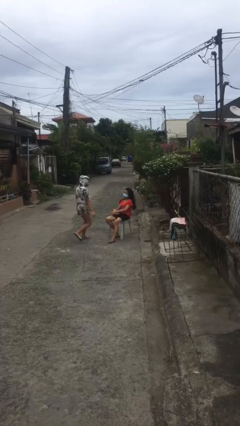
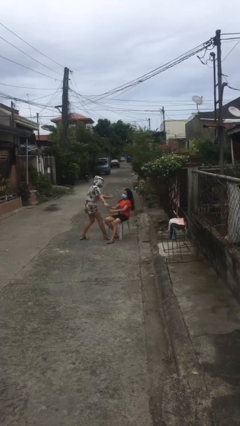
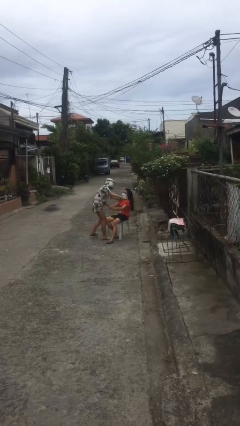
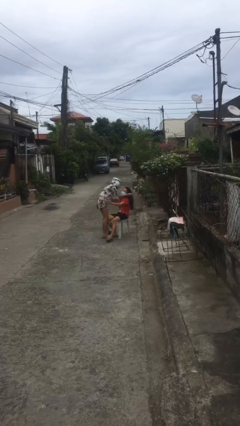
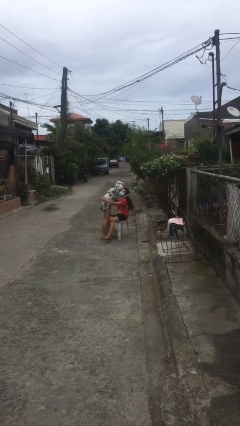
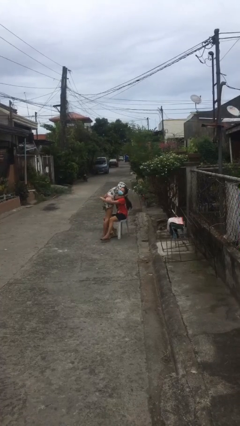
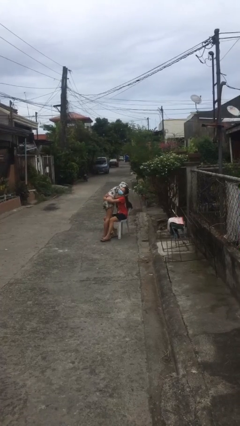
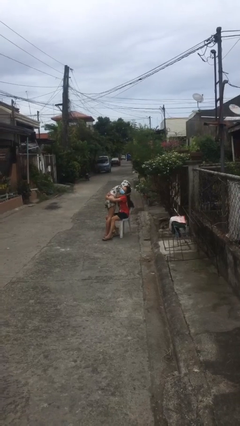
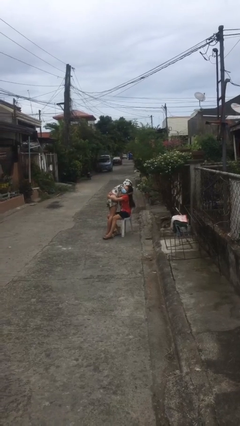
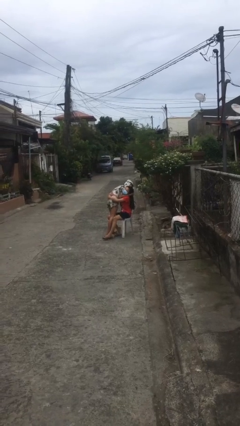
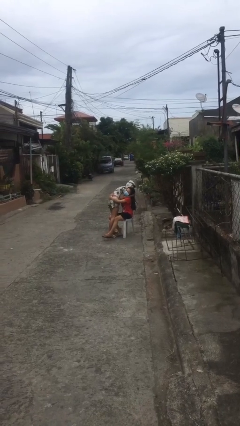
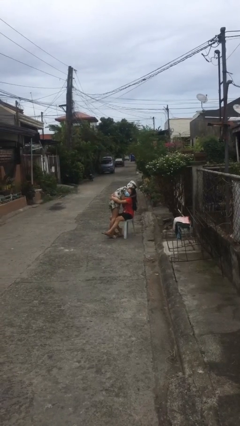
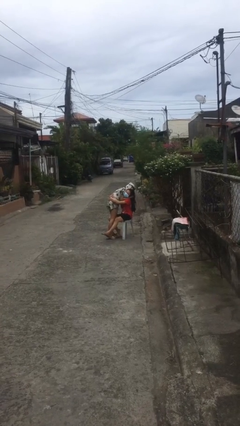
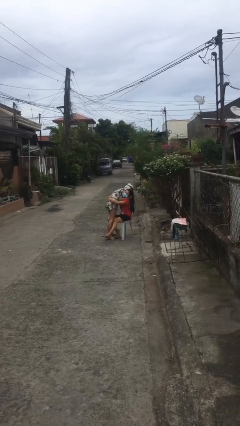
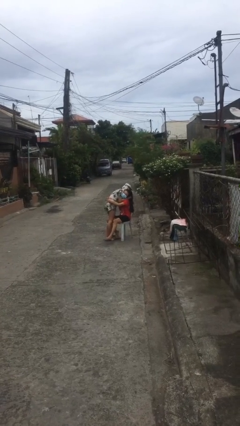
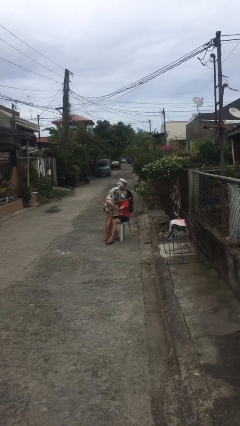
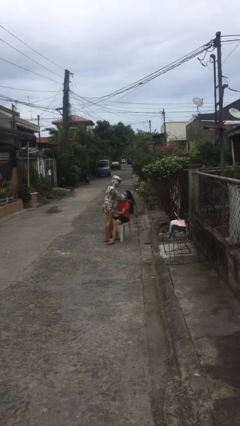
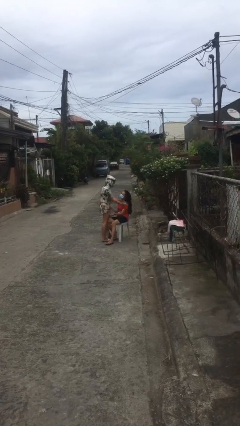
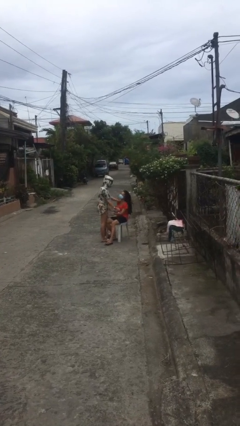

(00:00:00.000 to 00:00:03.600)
person embraces person

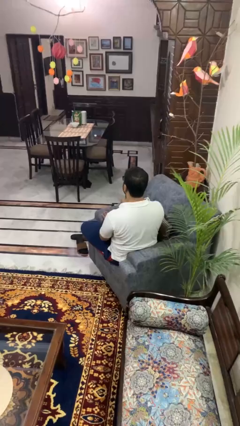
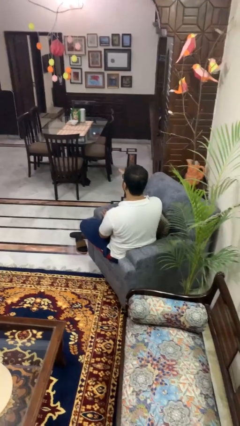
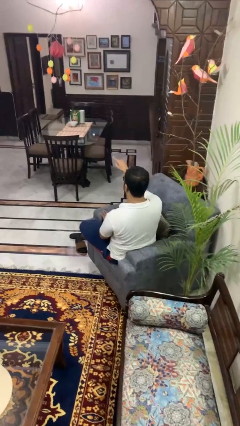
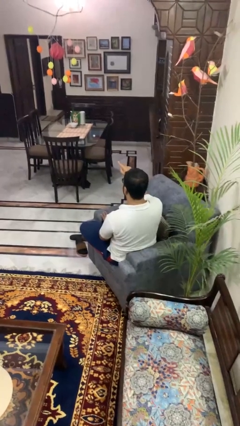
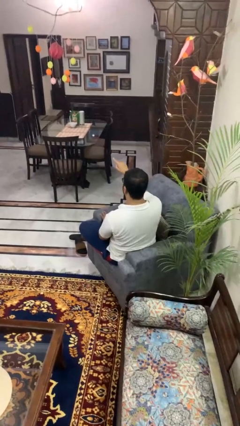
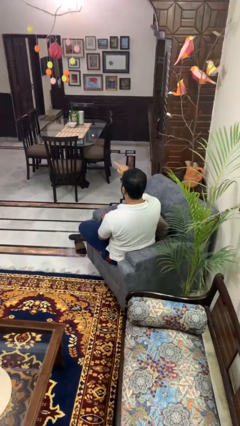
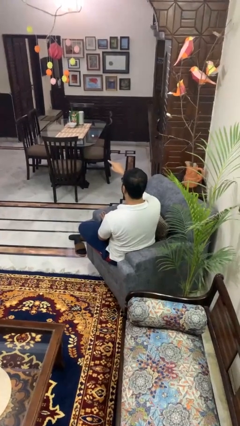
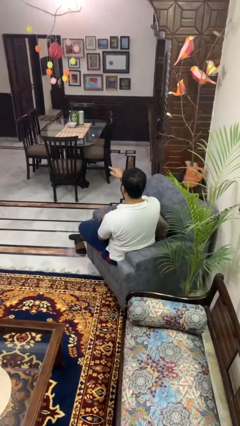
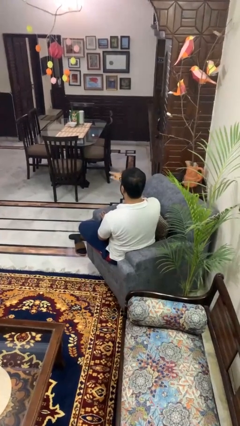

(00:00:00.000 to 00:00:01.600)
person points at person

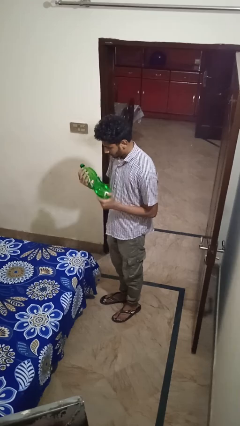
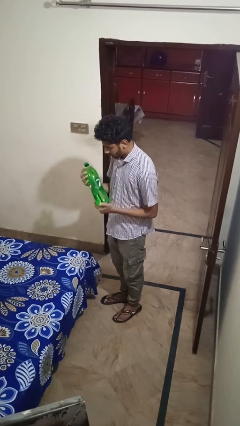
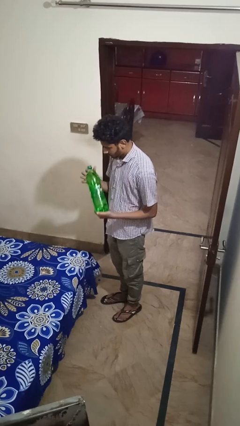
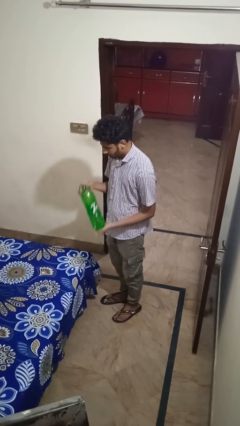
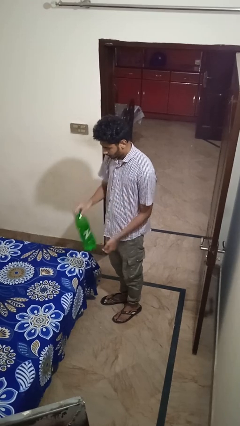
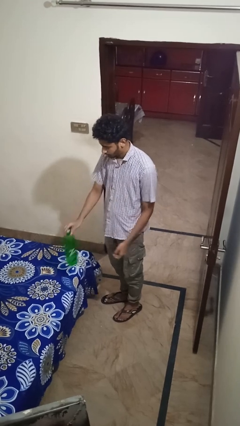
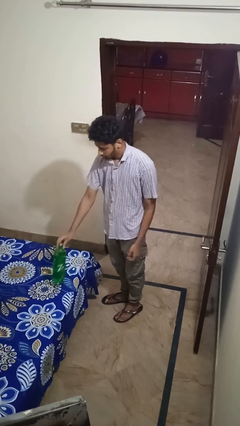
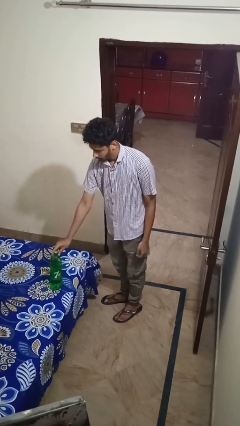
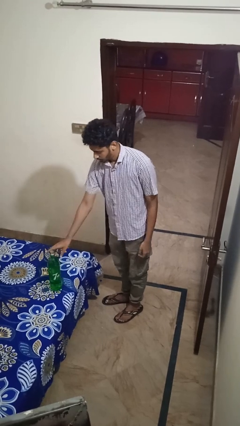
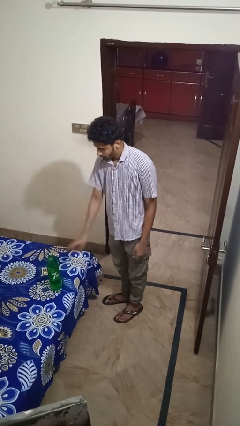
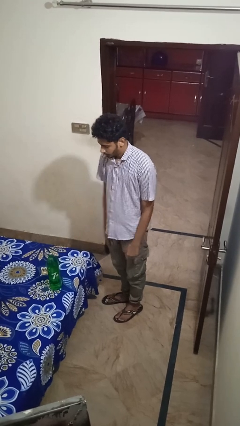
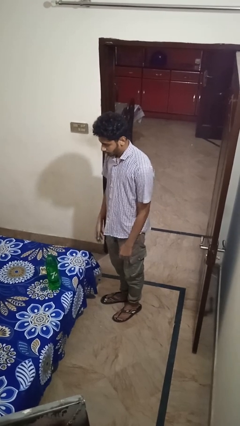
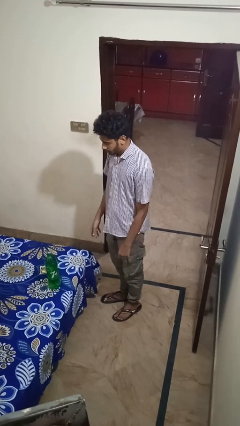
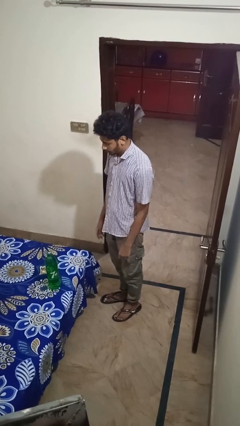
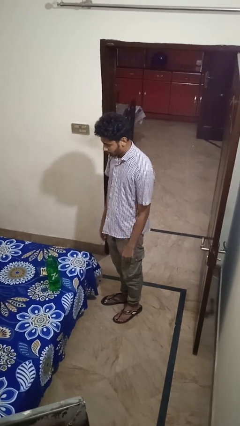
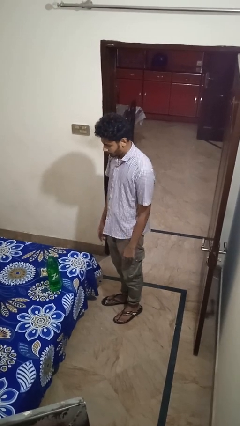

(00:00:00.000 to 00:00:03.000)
person puts down object on bed

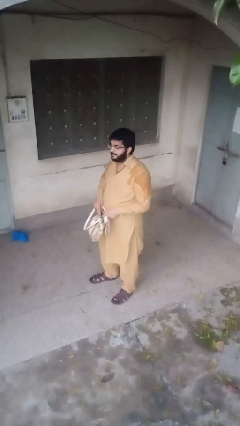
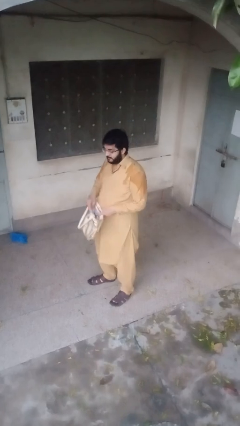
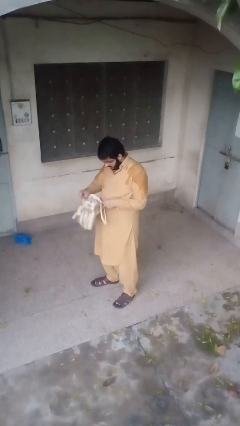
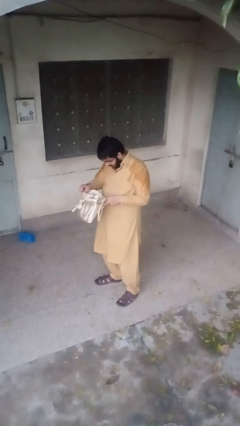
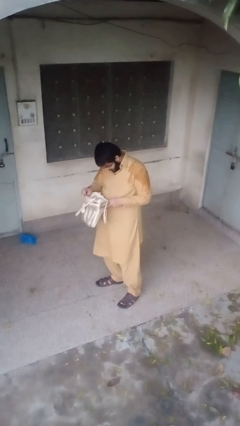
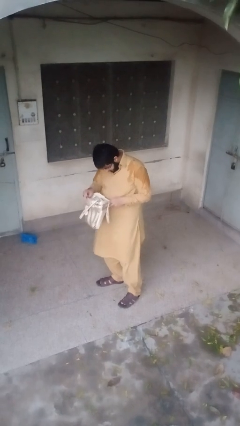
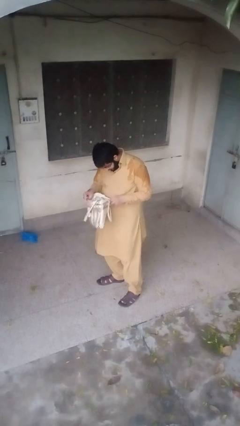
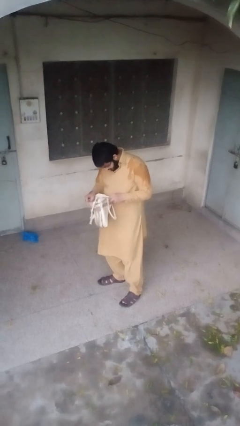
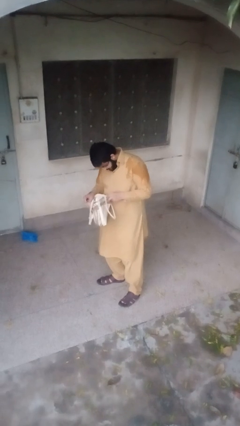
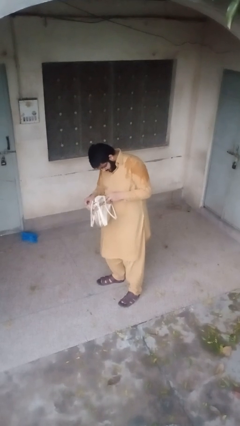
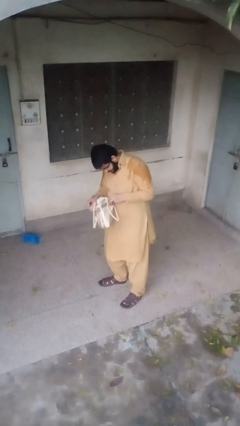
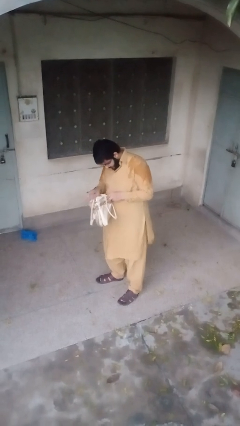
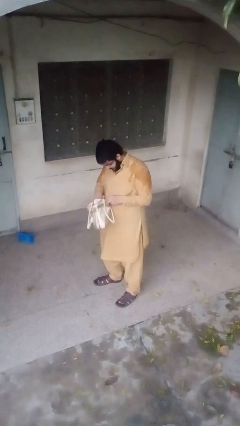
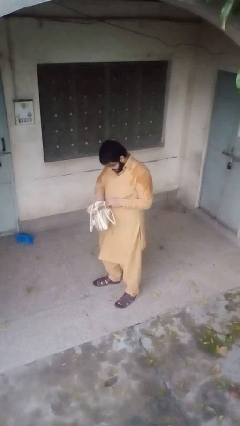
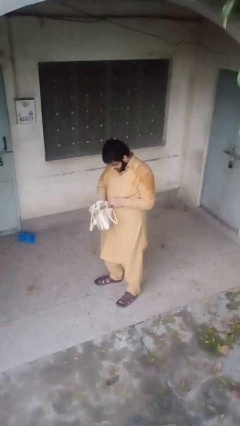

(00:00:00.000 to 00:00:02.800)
person searches in purse

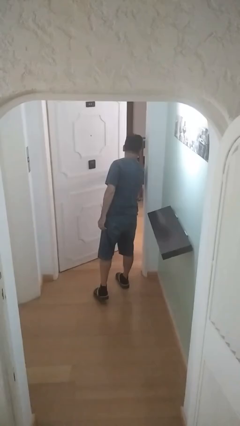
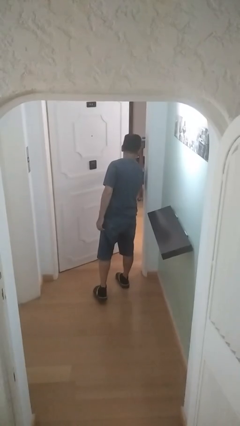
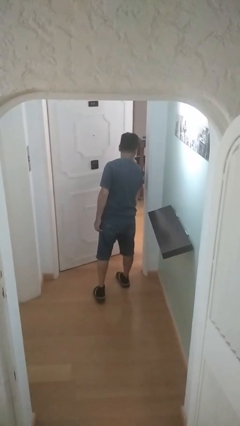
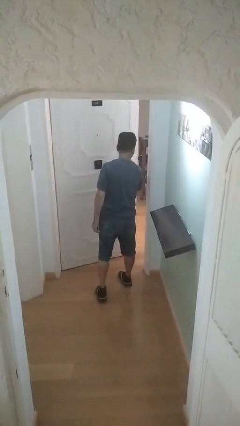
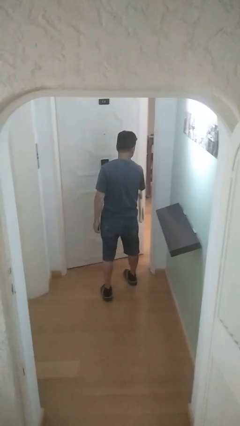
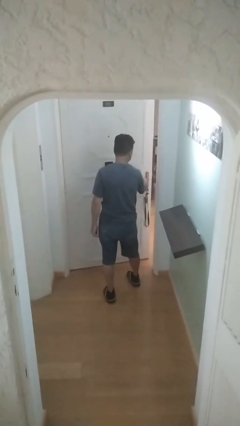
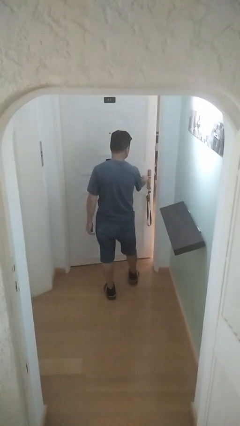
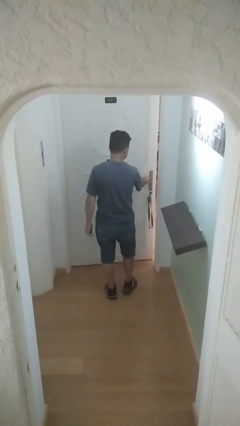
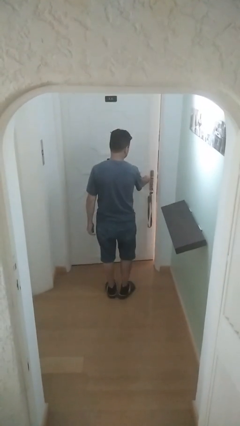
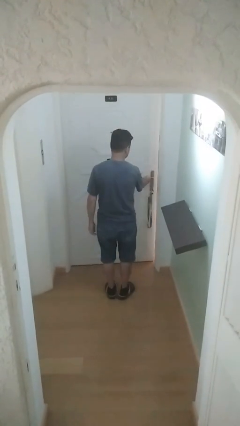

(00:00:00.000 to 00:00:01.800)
person closes facility door

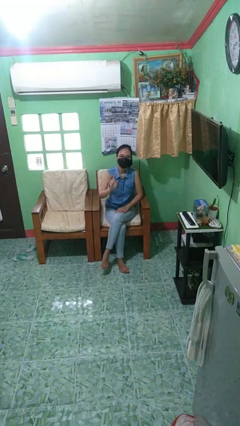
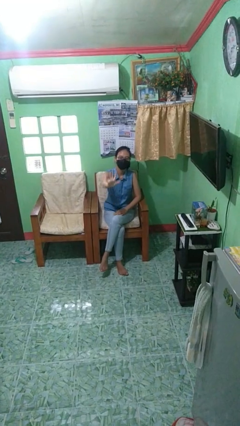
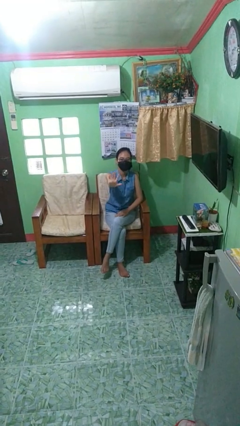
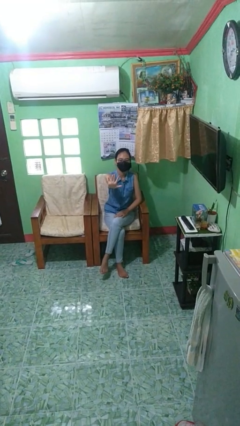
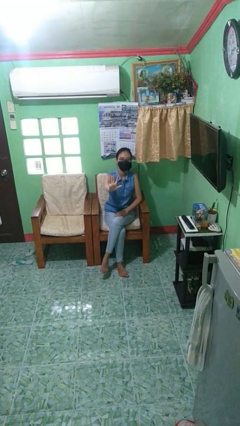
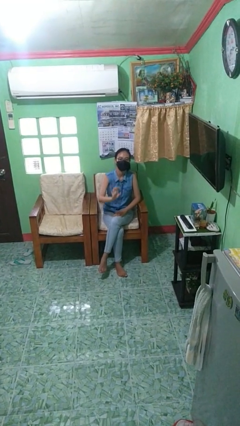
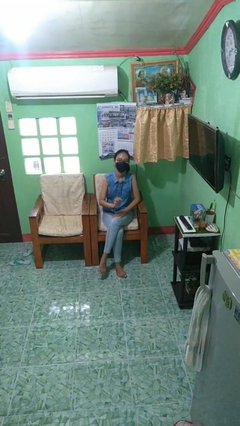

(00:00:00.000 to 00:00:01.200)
person gestures stop

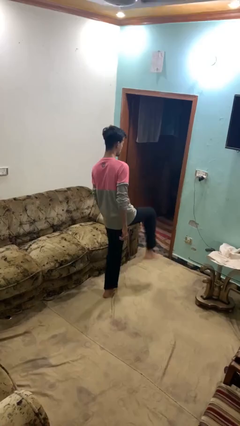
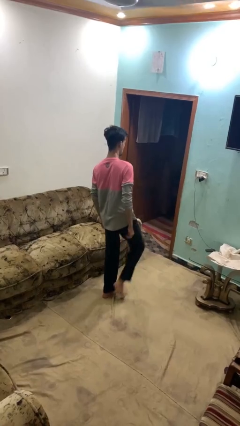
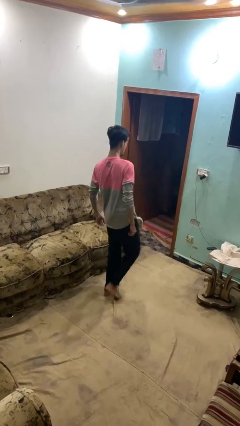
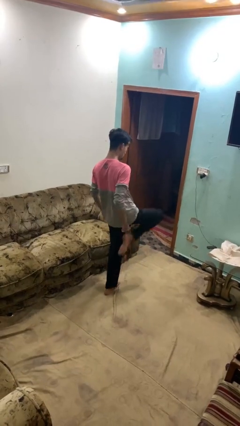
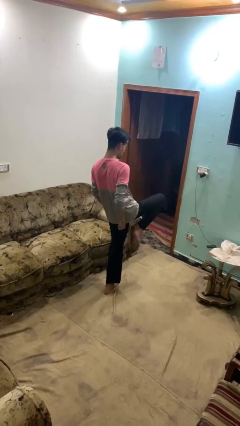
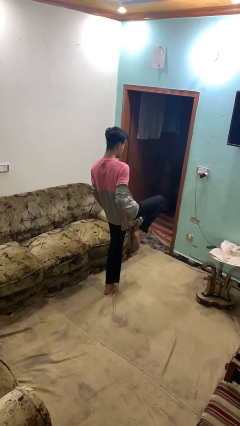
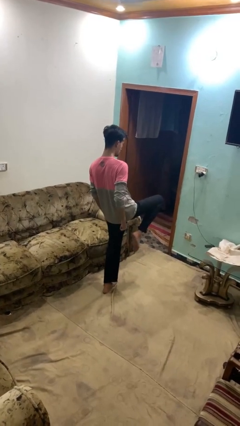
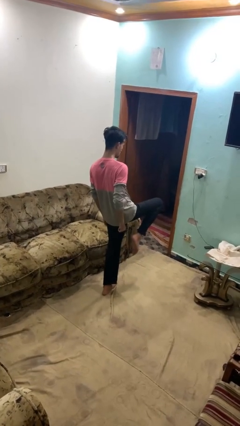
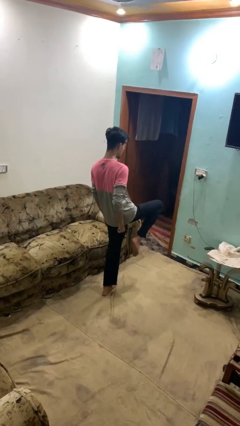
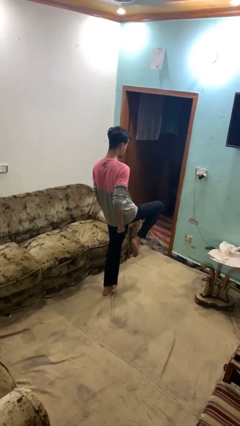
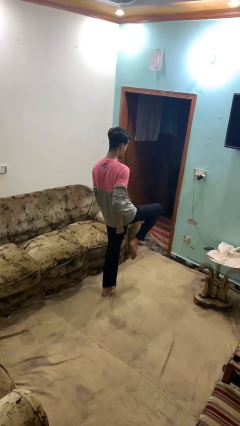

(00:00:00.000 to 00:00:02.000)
person karate chop

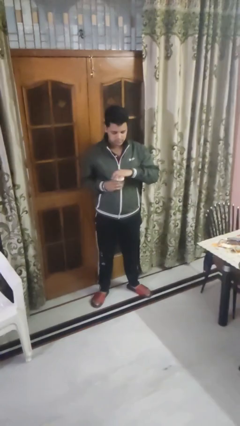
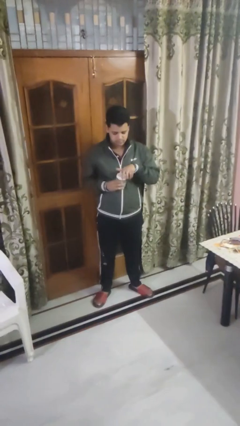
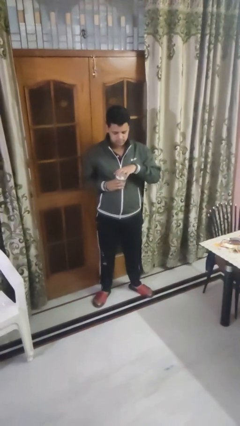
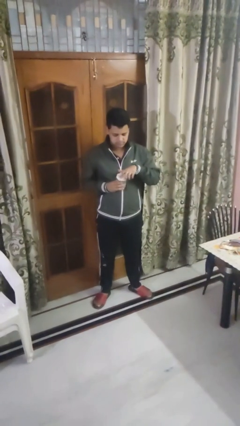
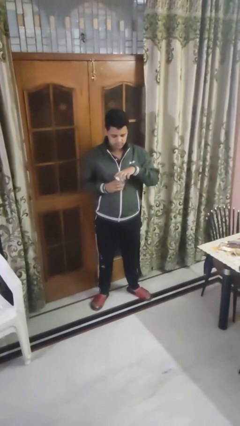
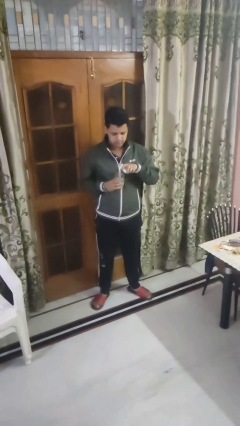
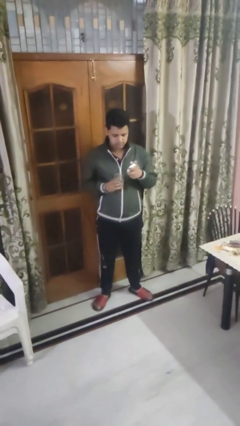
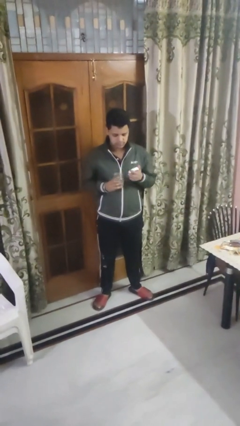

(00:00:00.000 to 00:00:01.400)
person opens jar
